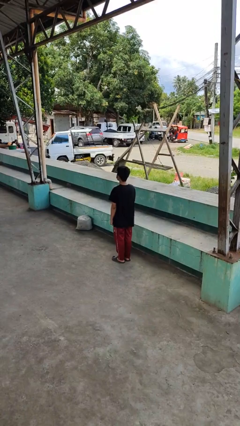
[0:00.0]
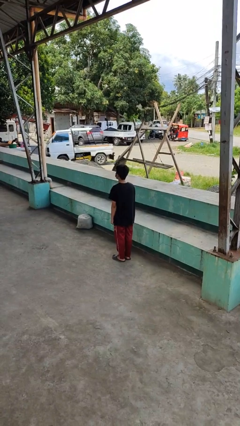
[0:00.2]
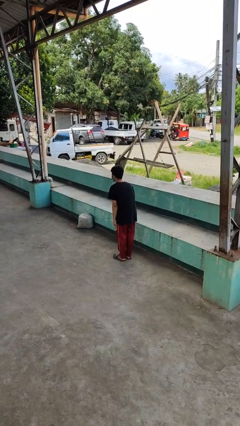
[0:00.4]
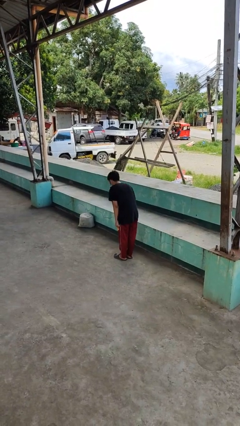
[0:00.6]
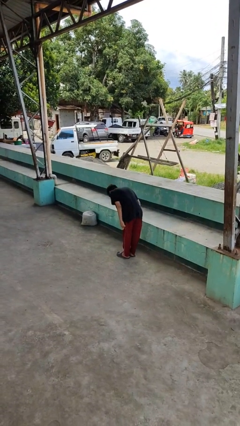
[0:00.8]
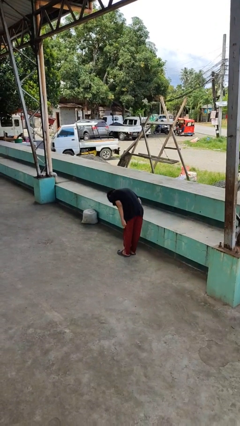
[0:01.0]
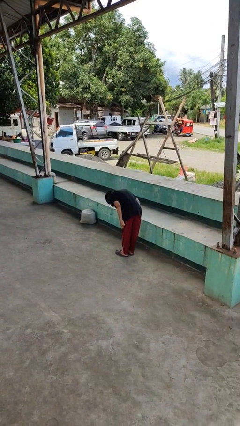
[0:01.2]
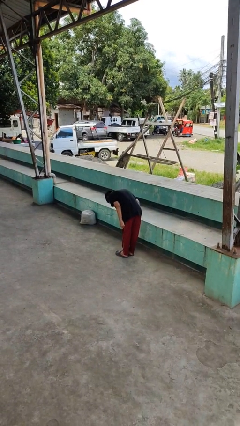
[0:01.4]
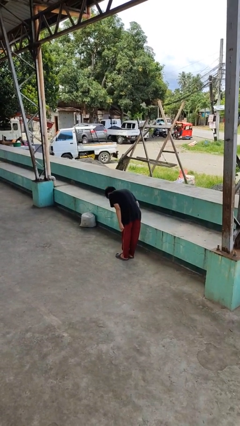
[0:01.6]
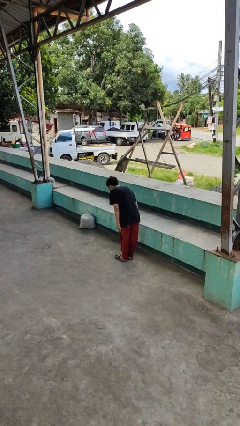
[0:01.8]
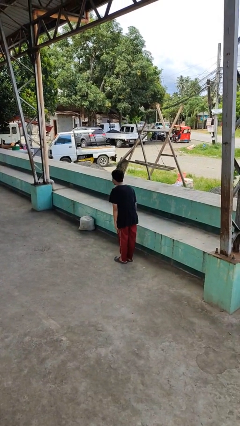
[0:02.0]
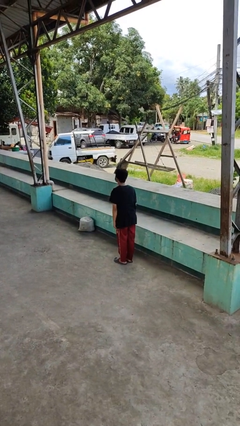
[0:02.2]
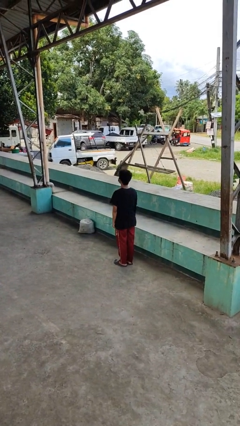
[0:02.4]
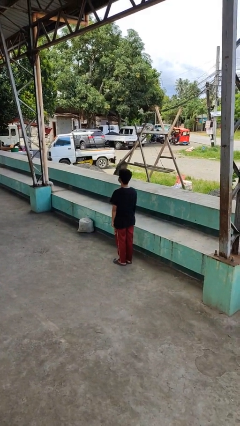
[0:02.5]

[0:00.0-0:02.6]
person bows

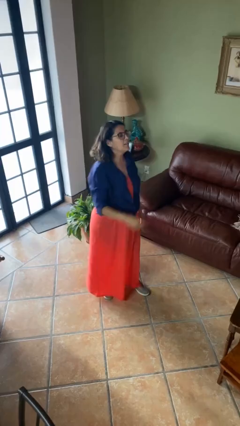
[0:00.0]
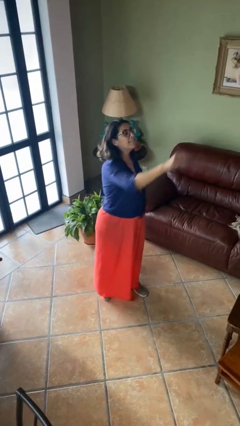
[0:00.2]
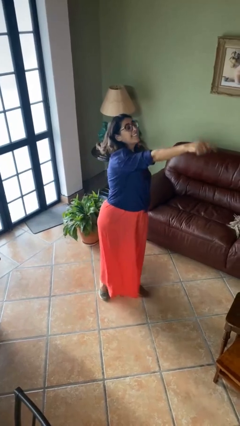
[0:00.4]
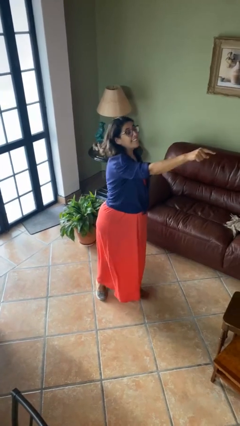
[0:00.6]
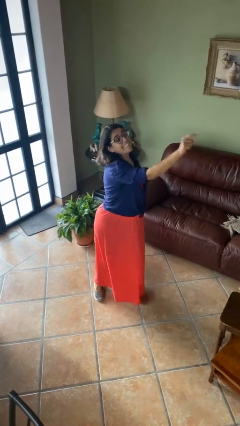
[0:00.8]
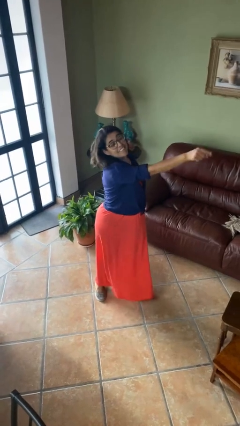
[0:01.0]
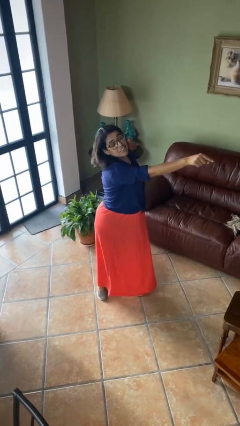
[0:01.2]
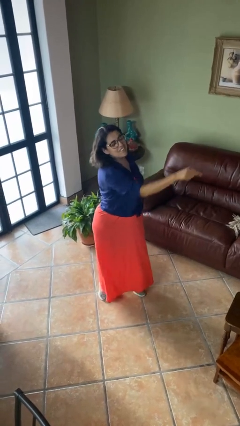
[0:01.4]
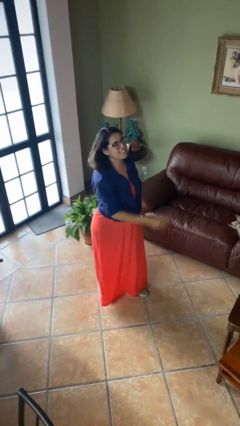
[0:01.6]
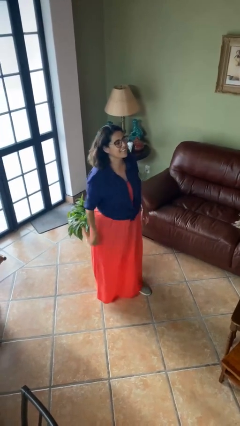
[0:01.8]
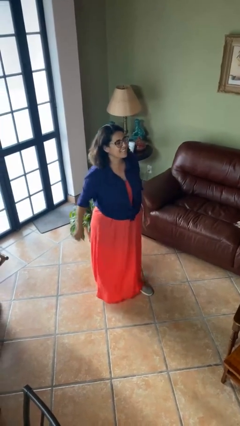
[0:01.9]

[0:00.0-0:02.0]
person points at person

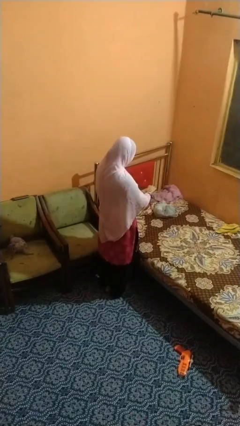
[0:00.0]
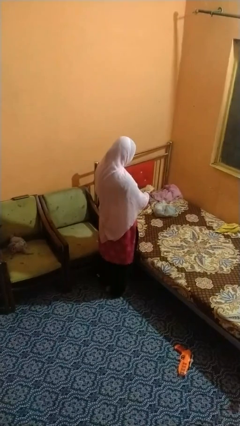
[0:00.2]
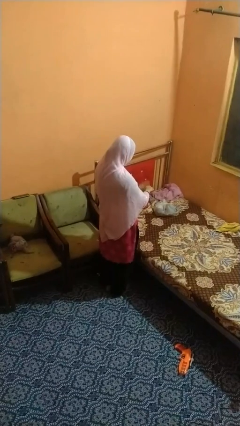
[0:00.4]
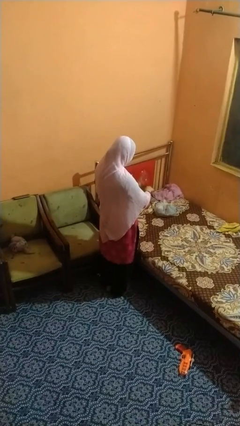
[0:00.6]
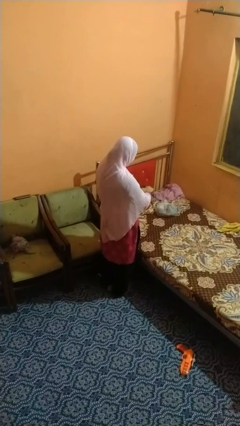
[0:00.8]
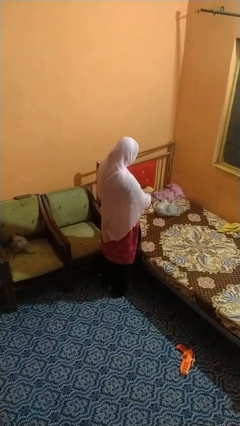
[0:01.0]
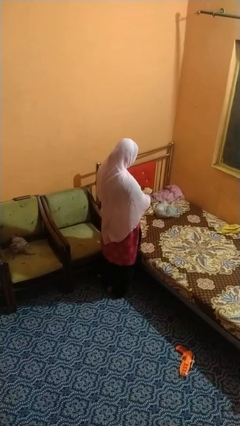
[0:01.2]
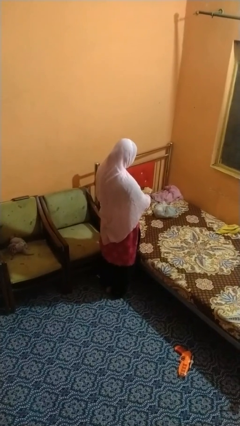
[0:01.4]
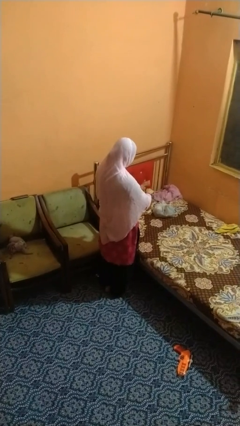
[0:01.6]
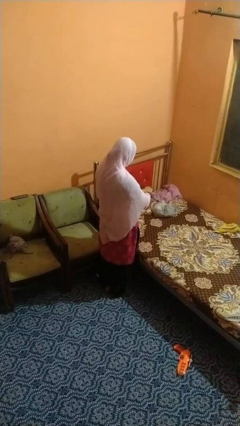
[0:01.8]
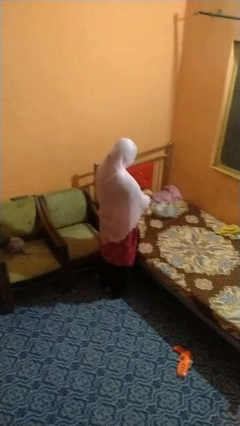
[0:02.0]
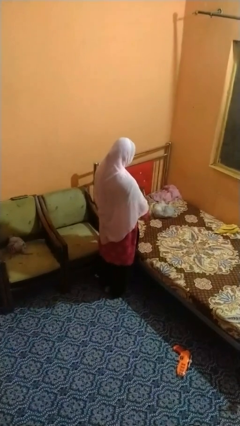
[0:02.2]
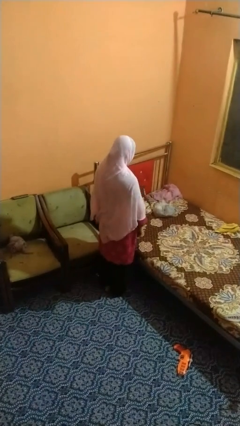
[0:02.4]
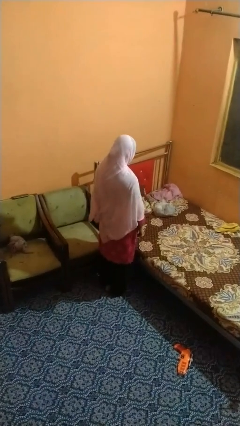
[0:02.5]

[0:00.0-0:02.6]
person swats bug

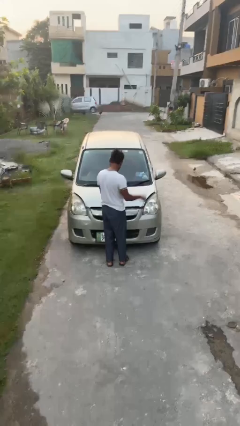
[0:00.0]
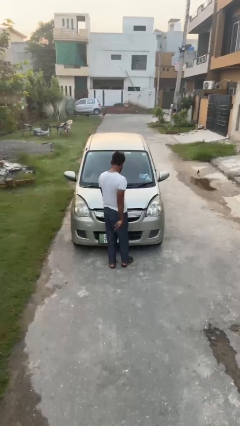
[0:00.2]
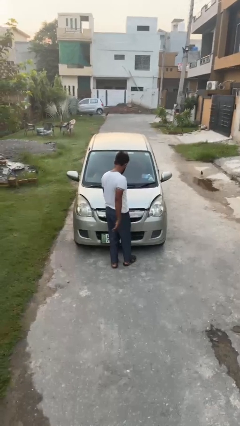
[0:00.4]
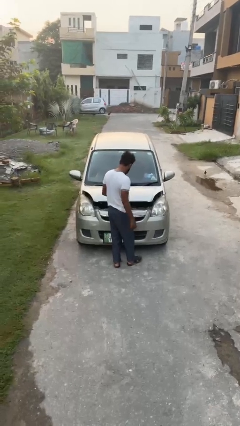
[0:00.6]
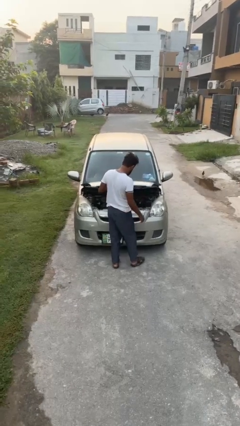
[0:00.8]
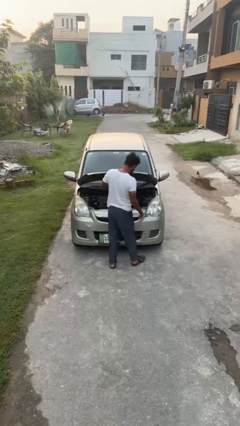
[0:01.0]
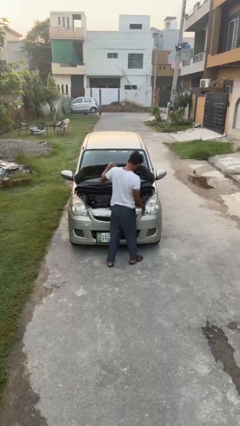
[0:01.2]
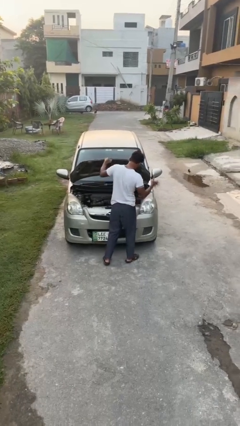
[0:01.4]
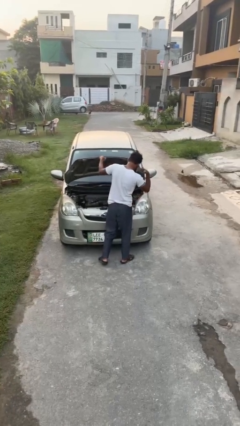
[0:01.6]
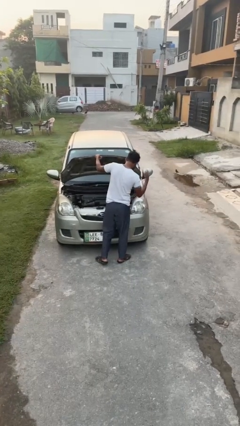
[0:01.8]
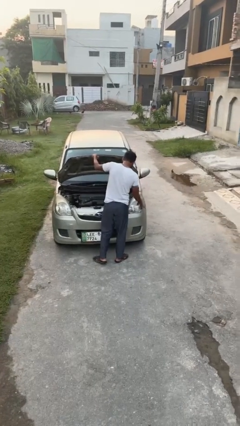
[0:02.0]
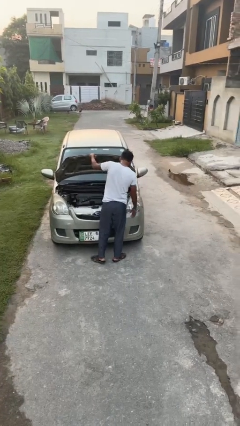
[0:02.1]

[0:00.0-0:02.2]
person opens car hood

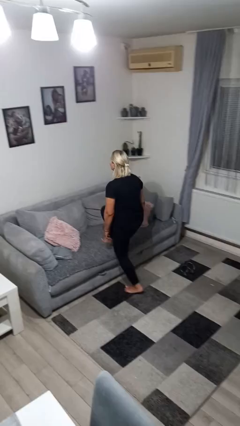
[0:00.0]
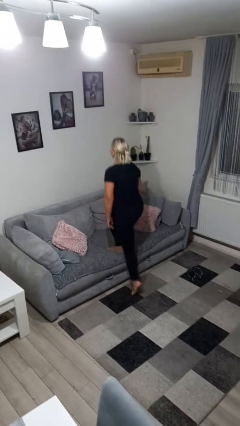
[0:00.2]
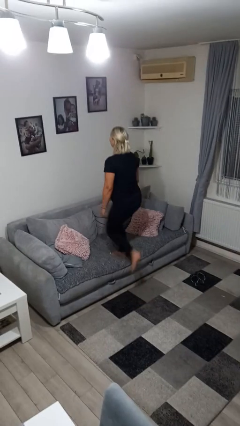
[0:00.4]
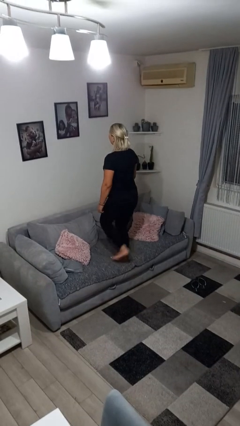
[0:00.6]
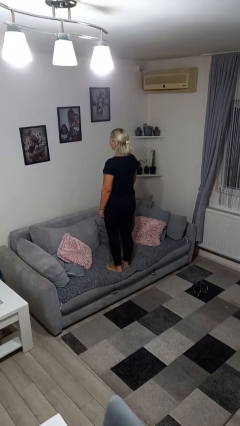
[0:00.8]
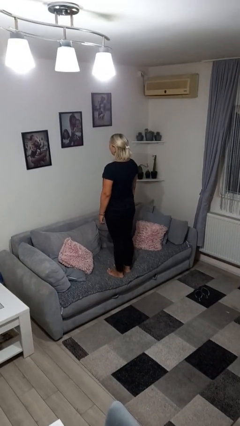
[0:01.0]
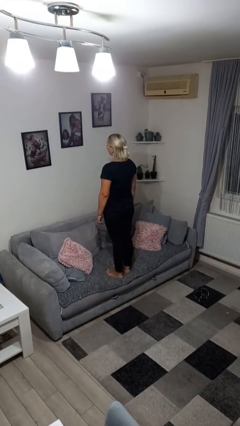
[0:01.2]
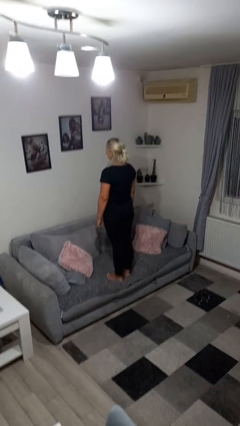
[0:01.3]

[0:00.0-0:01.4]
person climbs on couch

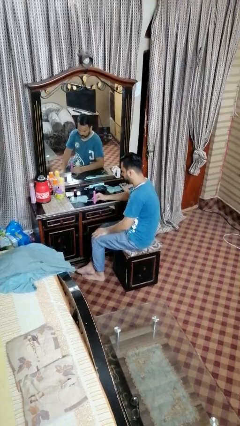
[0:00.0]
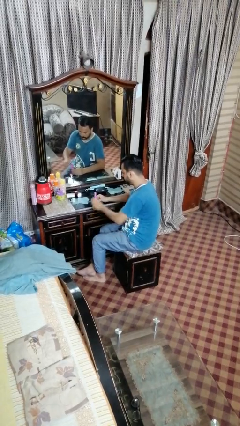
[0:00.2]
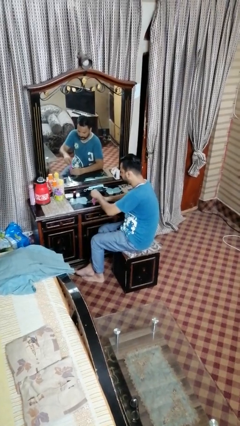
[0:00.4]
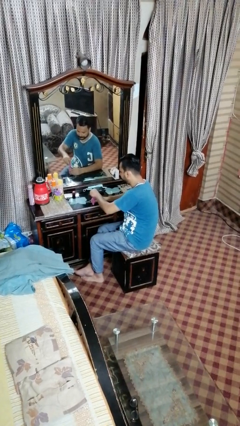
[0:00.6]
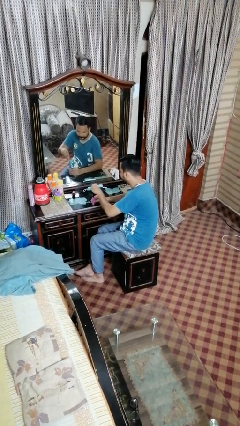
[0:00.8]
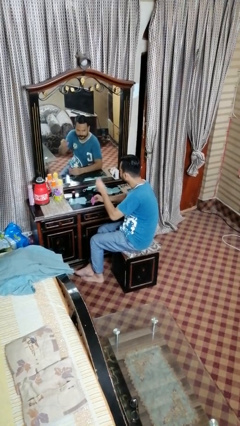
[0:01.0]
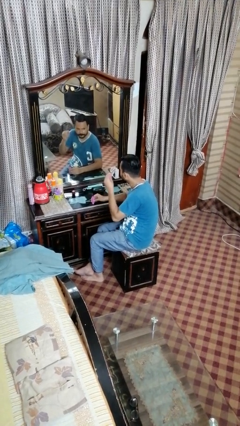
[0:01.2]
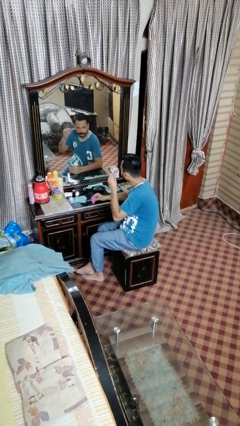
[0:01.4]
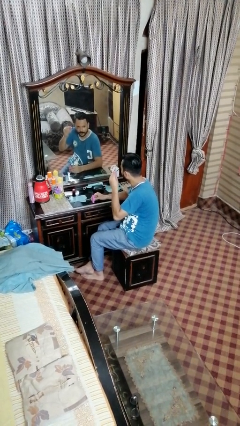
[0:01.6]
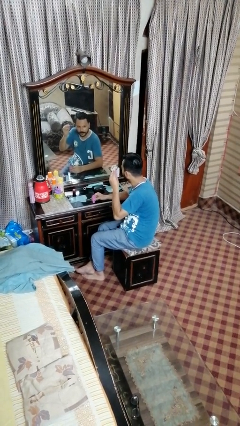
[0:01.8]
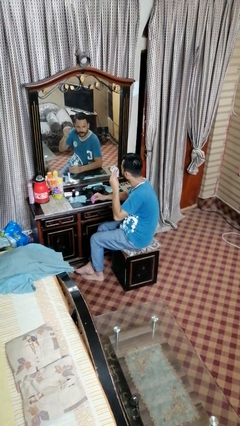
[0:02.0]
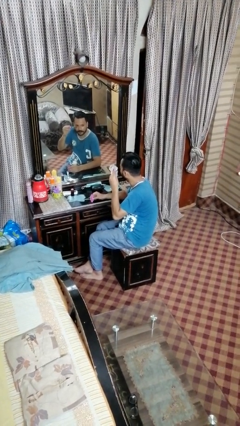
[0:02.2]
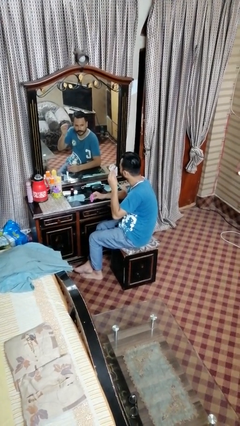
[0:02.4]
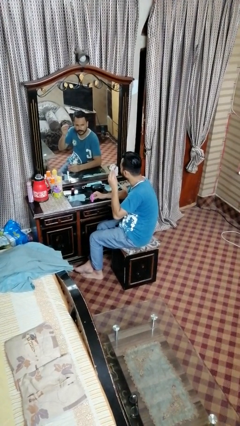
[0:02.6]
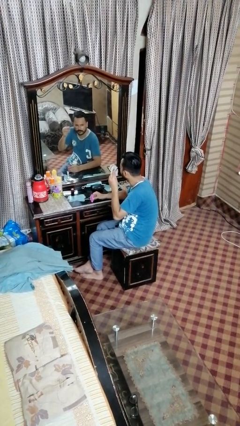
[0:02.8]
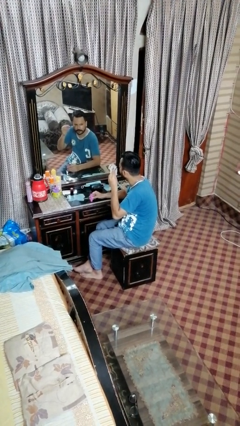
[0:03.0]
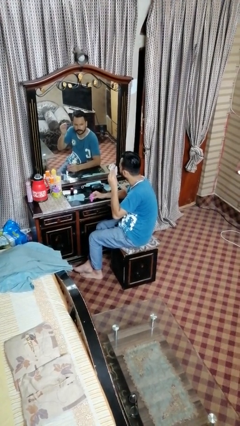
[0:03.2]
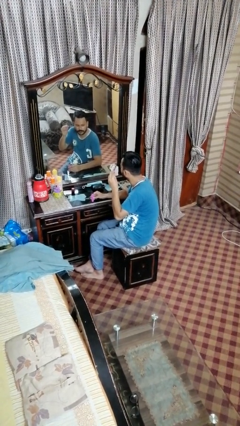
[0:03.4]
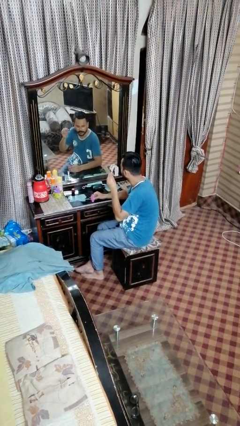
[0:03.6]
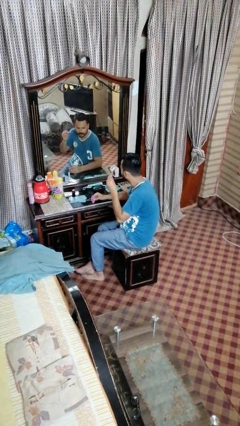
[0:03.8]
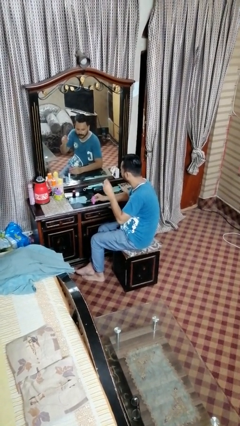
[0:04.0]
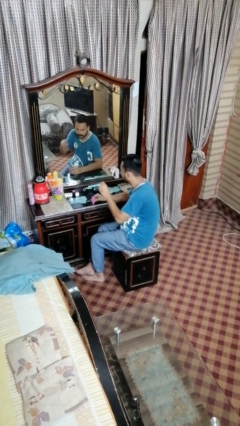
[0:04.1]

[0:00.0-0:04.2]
person applies eye makeup

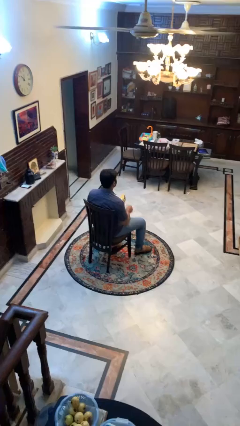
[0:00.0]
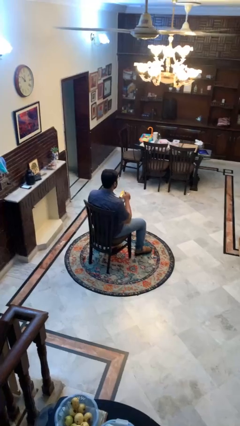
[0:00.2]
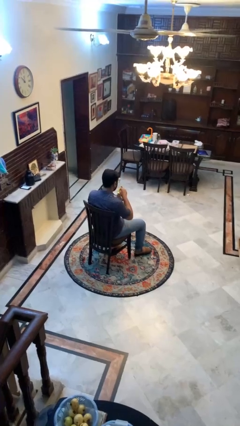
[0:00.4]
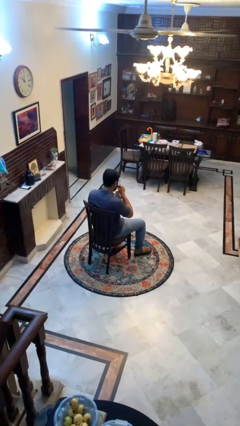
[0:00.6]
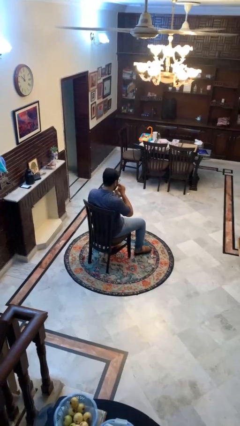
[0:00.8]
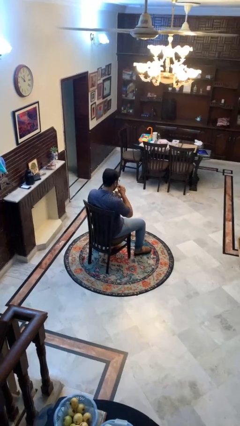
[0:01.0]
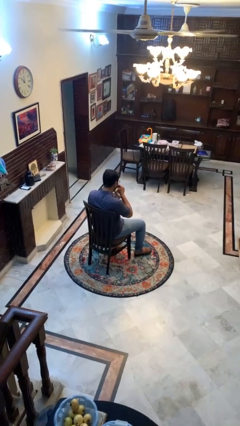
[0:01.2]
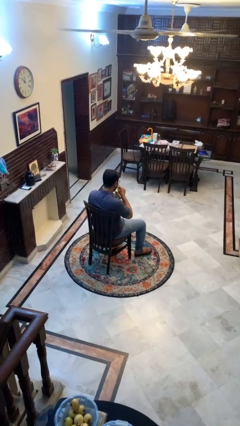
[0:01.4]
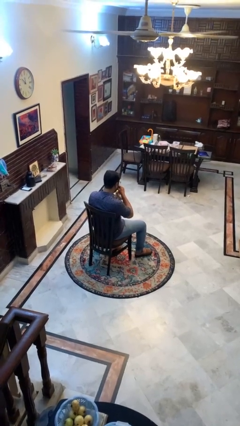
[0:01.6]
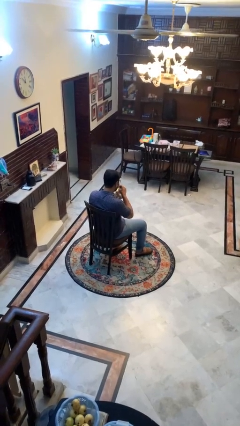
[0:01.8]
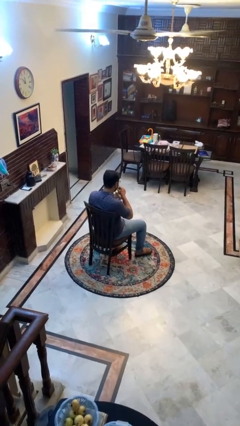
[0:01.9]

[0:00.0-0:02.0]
person eats snack from bag
